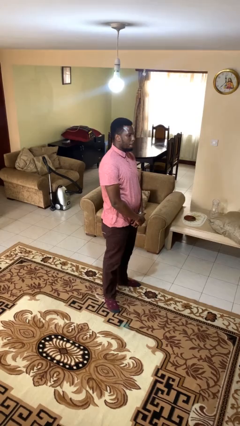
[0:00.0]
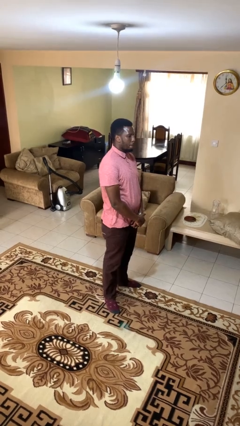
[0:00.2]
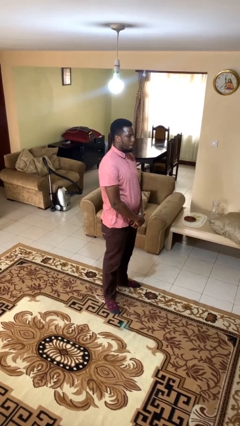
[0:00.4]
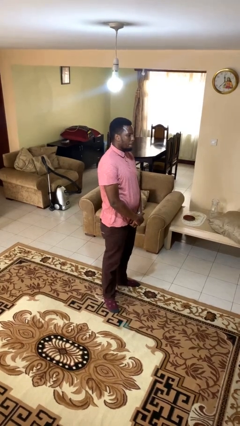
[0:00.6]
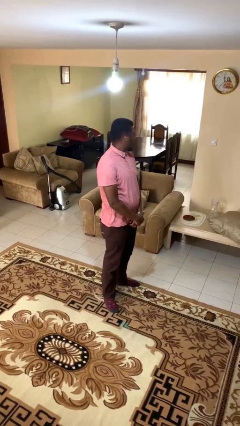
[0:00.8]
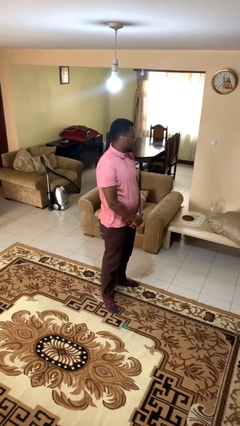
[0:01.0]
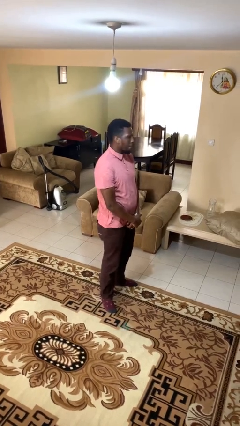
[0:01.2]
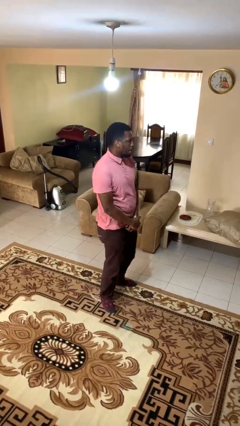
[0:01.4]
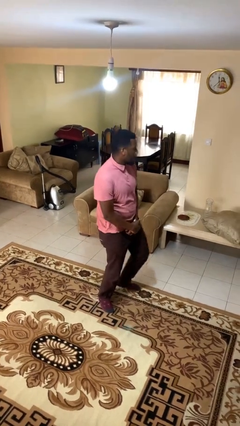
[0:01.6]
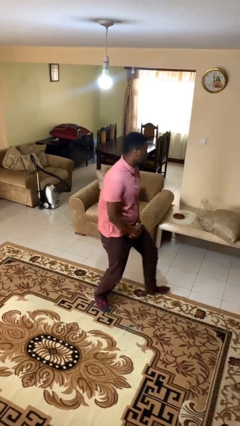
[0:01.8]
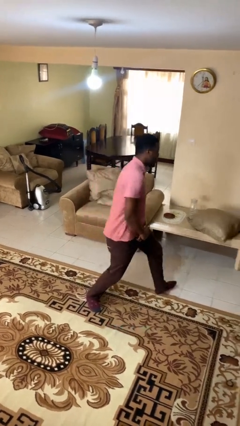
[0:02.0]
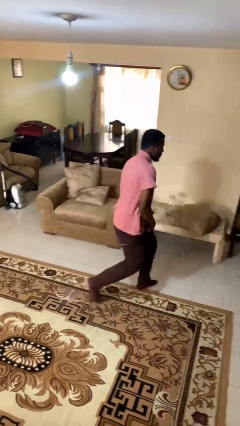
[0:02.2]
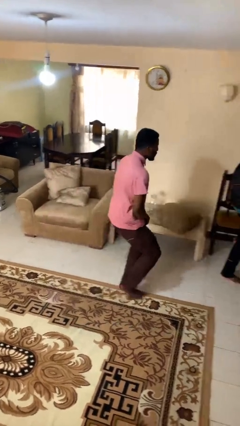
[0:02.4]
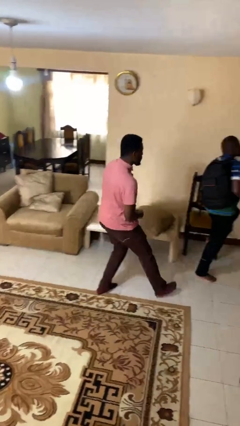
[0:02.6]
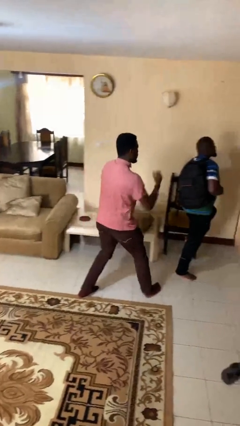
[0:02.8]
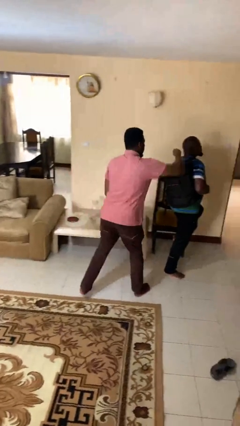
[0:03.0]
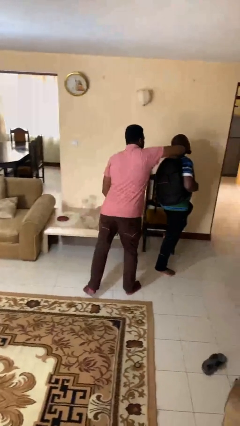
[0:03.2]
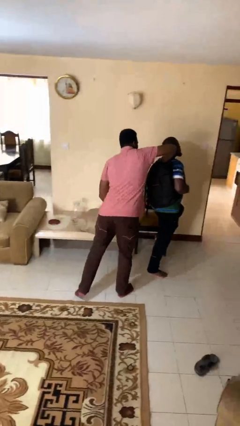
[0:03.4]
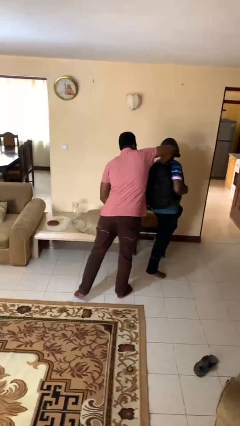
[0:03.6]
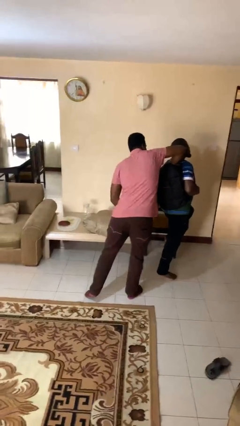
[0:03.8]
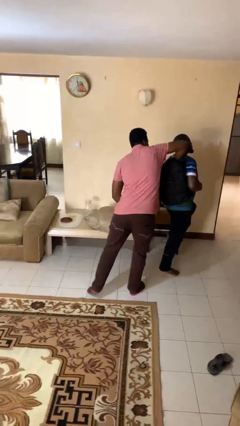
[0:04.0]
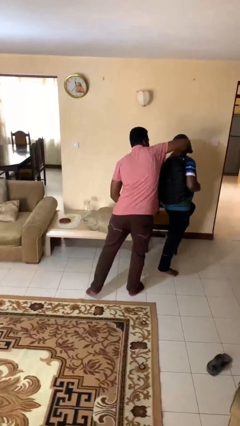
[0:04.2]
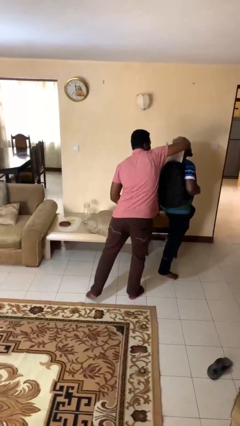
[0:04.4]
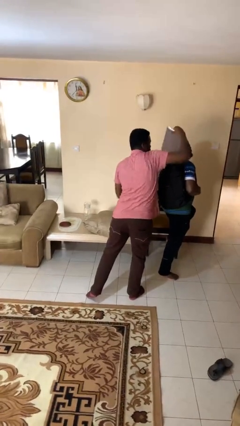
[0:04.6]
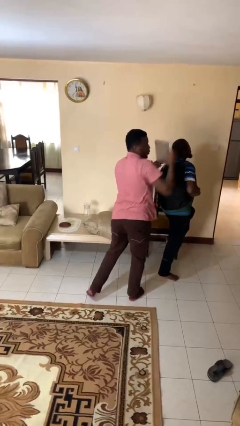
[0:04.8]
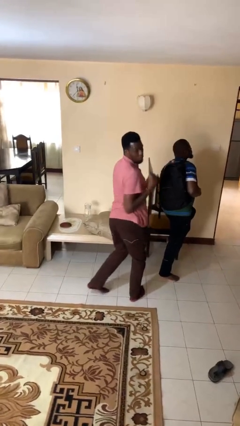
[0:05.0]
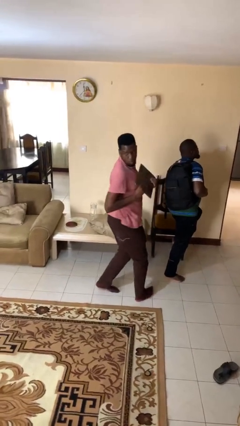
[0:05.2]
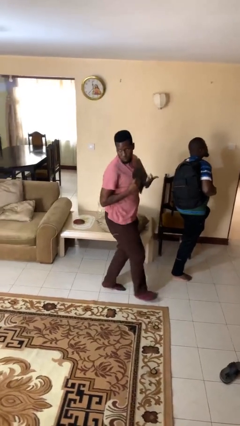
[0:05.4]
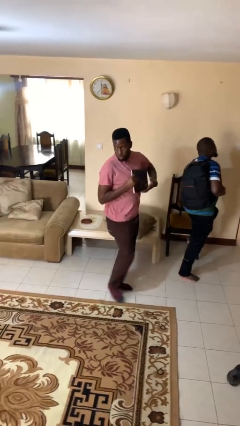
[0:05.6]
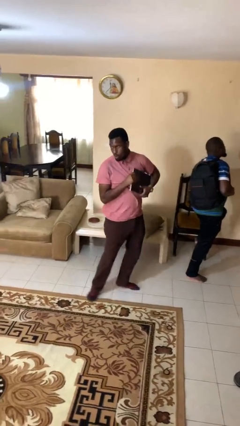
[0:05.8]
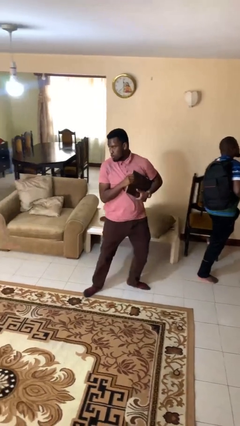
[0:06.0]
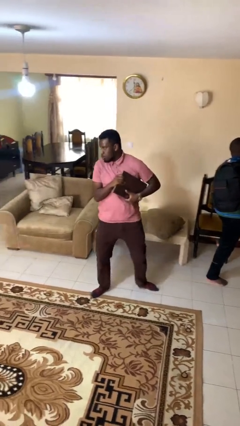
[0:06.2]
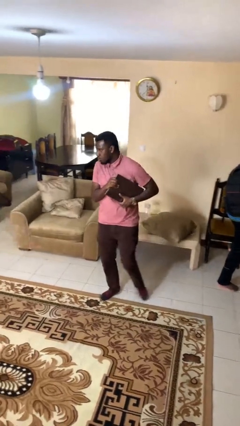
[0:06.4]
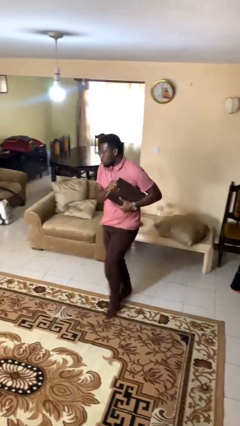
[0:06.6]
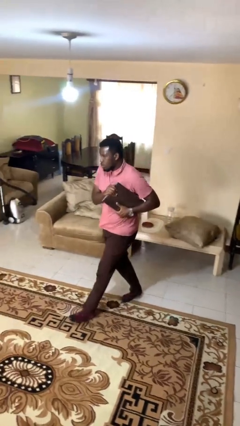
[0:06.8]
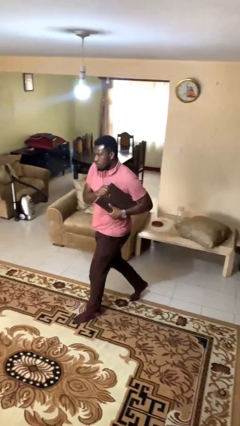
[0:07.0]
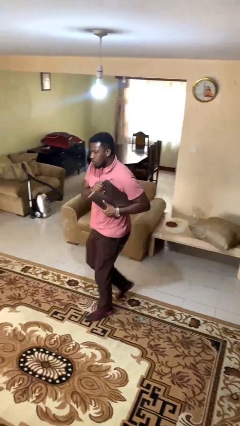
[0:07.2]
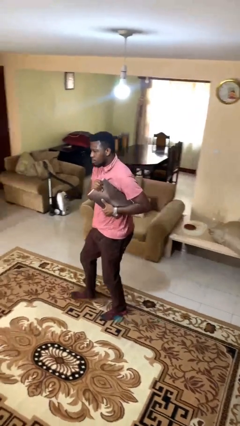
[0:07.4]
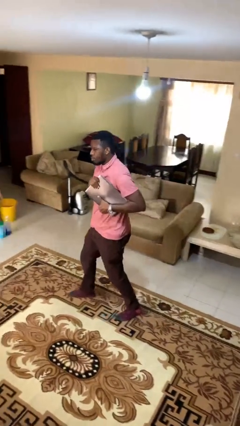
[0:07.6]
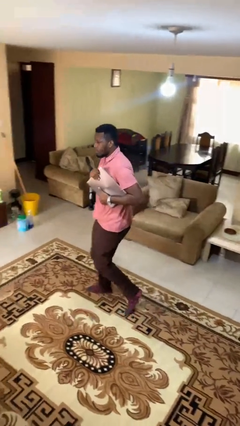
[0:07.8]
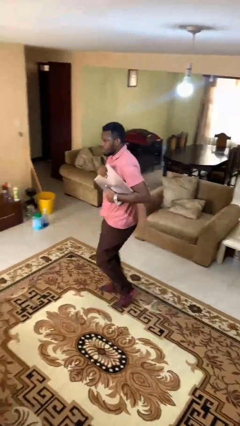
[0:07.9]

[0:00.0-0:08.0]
person steals object from person

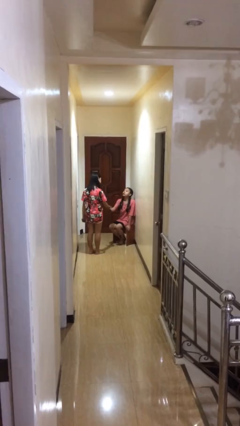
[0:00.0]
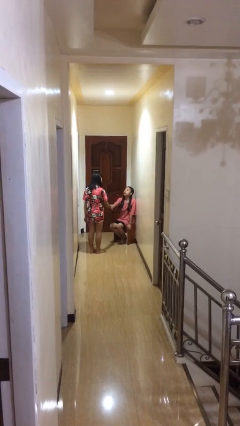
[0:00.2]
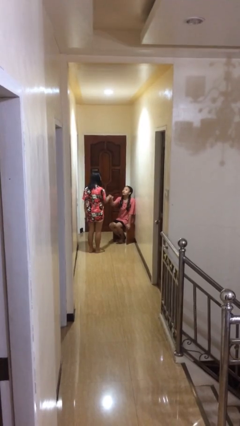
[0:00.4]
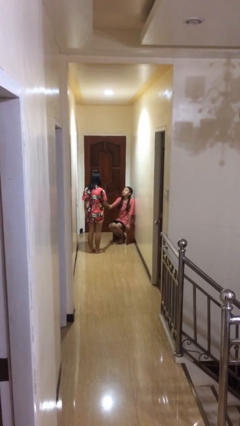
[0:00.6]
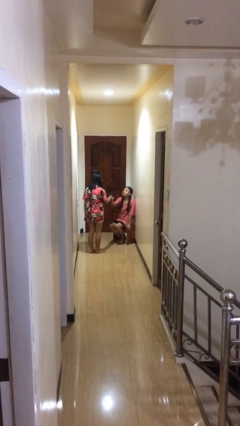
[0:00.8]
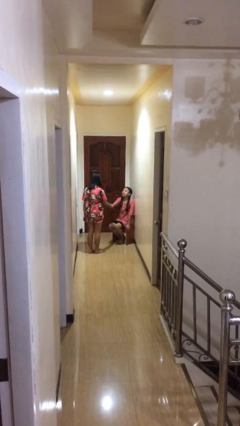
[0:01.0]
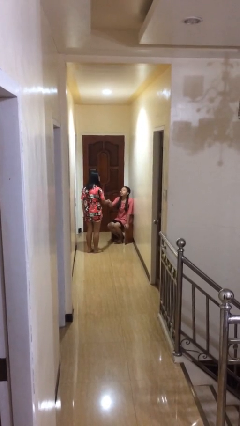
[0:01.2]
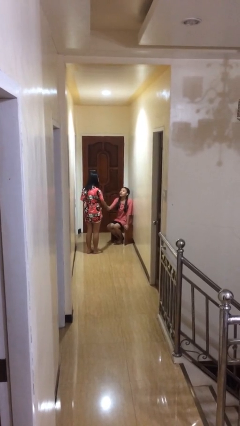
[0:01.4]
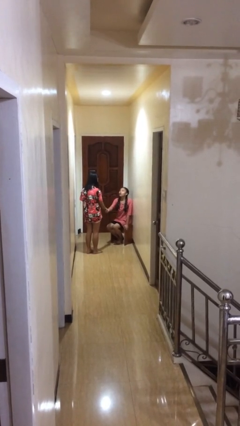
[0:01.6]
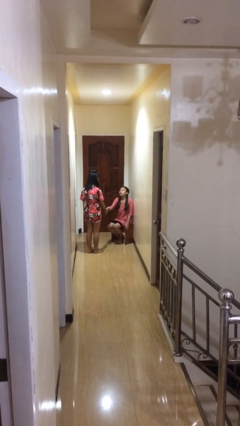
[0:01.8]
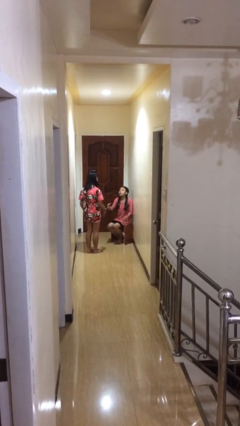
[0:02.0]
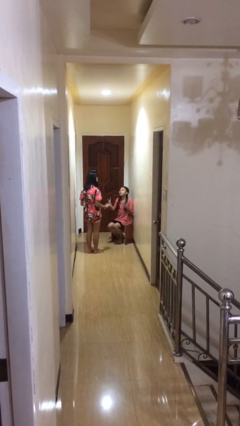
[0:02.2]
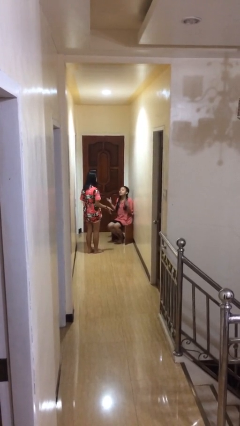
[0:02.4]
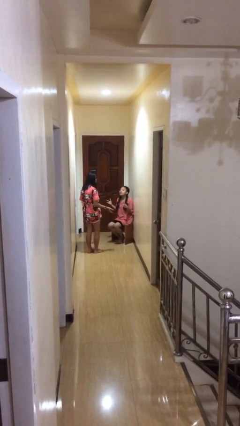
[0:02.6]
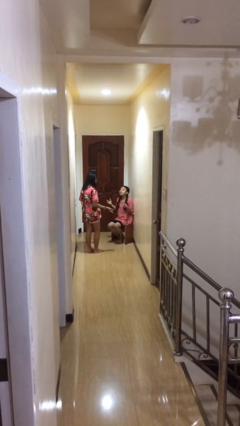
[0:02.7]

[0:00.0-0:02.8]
person shakes hand

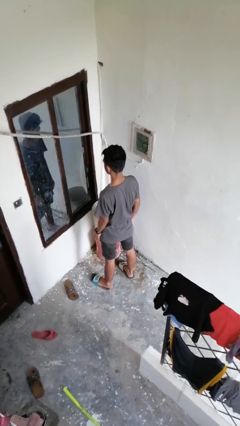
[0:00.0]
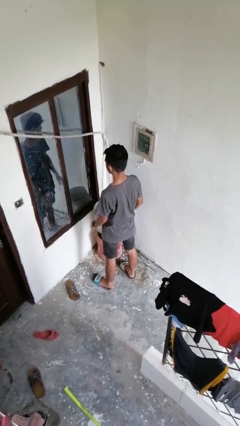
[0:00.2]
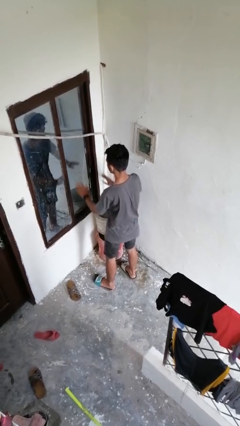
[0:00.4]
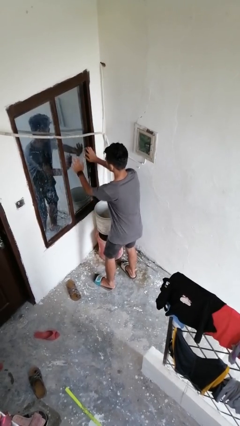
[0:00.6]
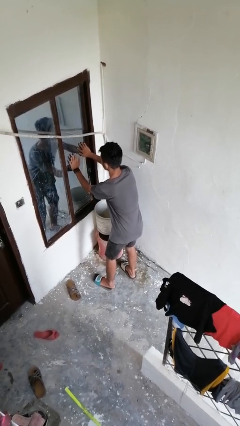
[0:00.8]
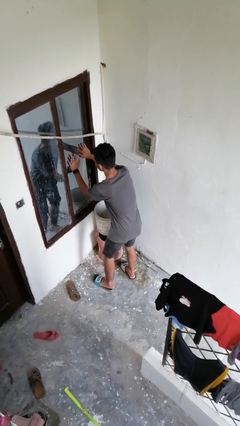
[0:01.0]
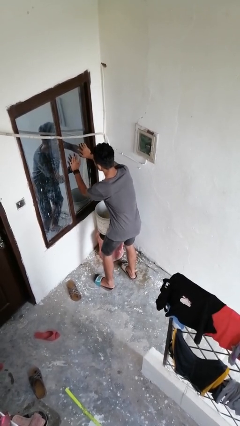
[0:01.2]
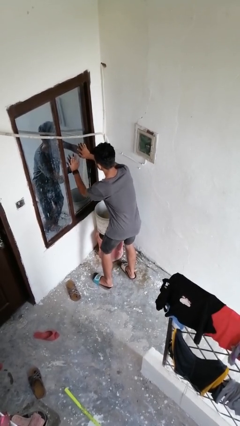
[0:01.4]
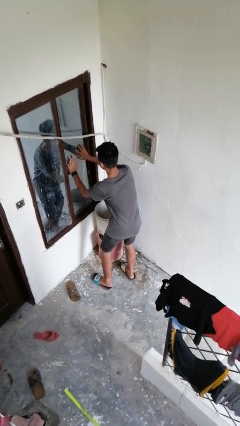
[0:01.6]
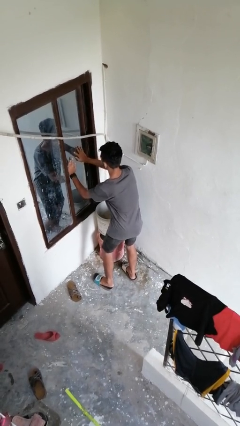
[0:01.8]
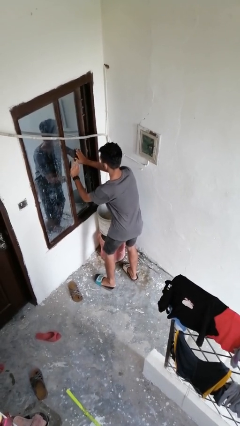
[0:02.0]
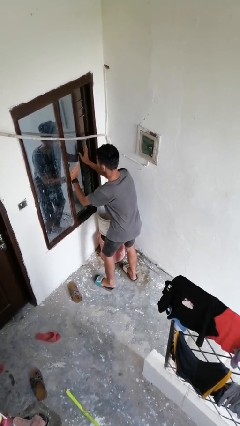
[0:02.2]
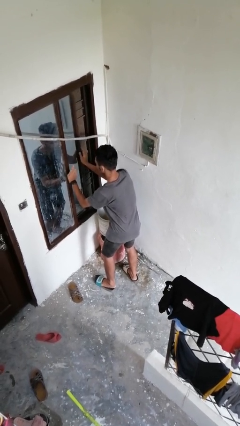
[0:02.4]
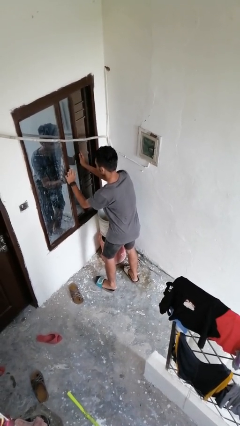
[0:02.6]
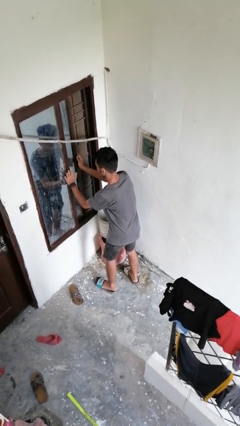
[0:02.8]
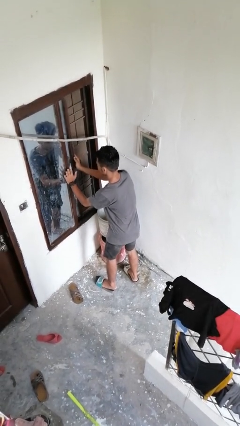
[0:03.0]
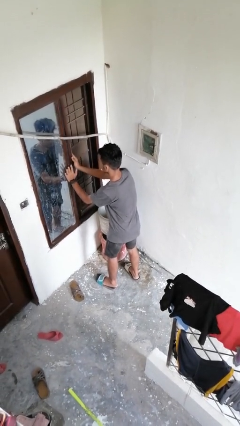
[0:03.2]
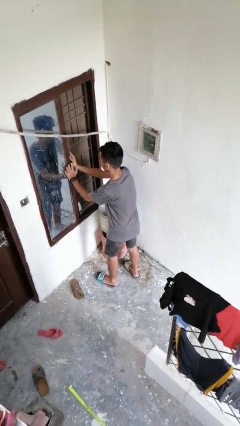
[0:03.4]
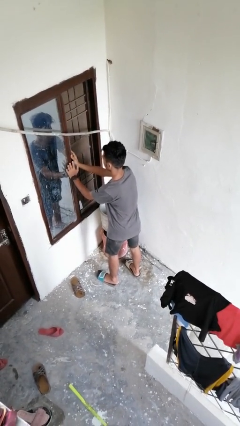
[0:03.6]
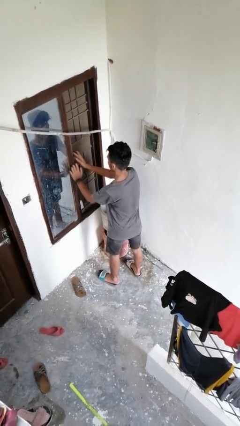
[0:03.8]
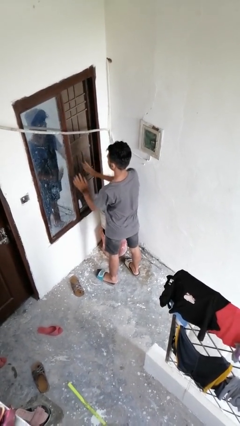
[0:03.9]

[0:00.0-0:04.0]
person opens home window

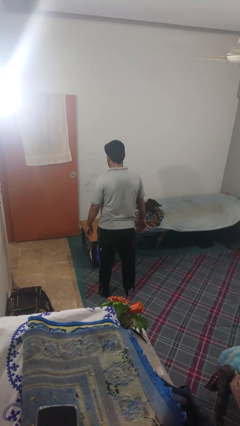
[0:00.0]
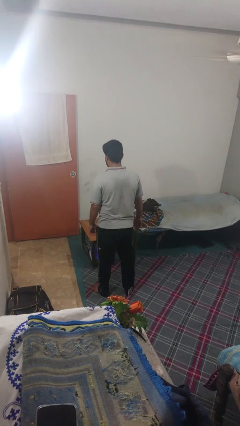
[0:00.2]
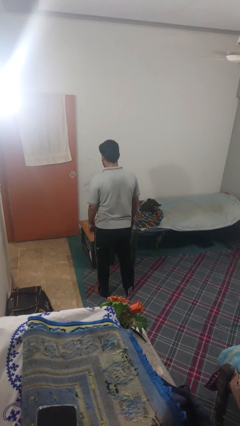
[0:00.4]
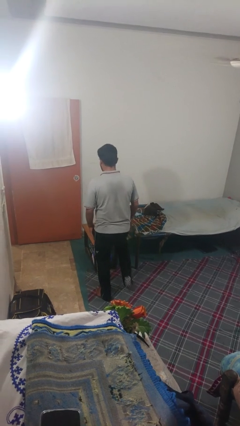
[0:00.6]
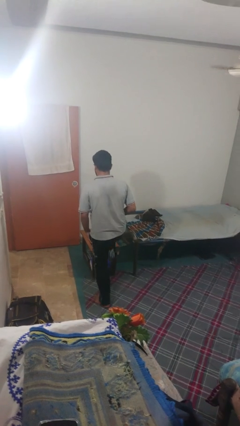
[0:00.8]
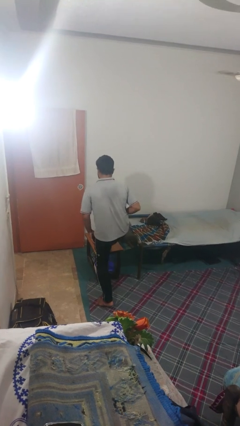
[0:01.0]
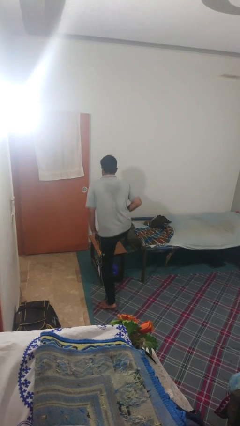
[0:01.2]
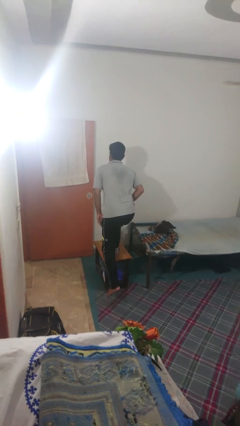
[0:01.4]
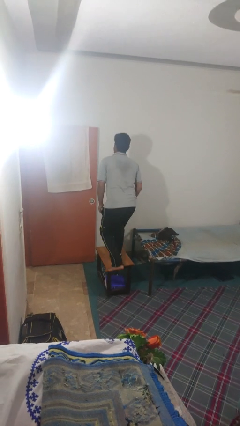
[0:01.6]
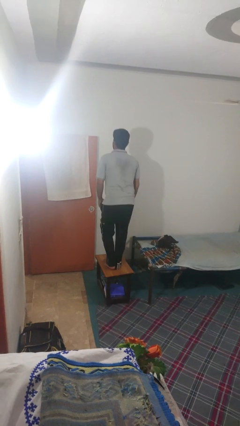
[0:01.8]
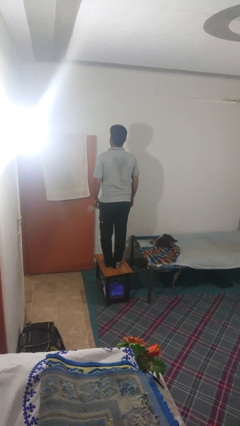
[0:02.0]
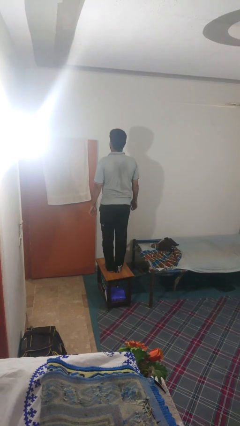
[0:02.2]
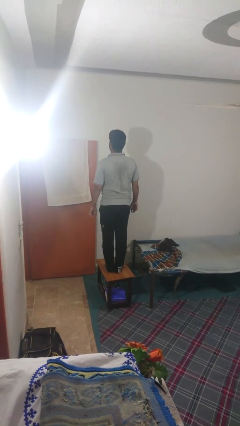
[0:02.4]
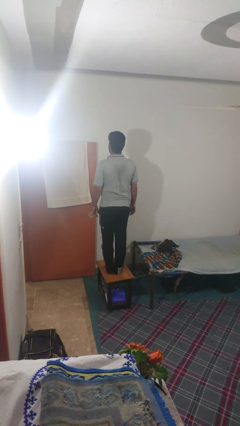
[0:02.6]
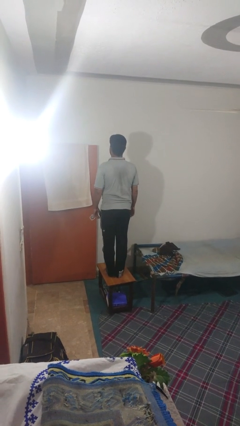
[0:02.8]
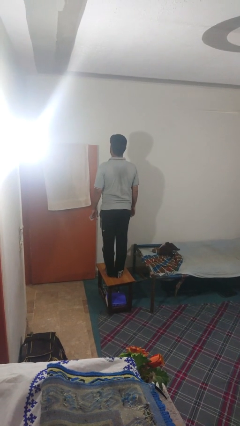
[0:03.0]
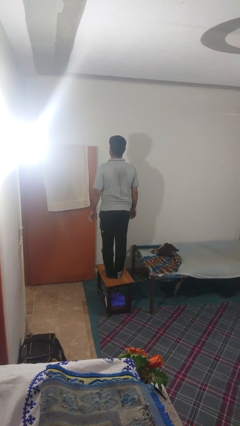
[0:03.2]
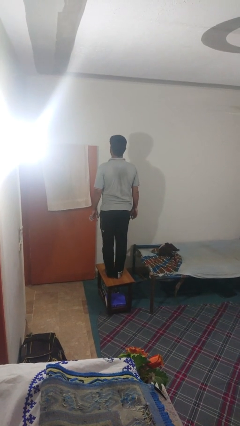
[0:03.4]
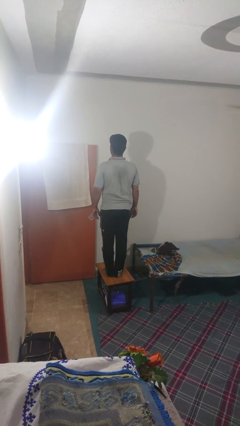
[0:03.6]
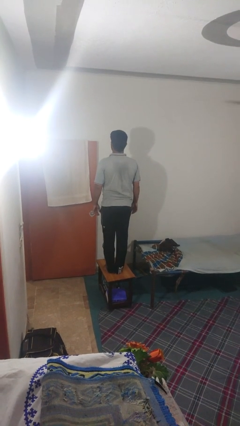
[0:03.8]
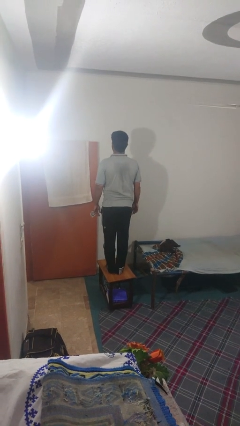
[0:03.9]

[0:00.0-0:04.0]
person climbs on table
